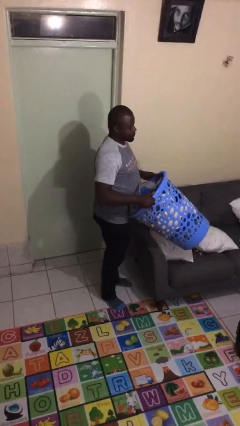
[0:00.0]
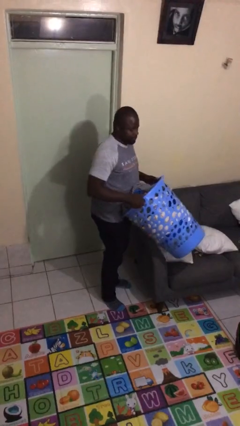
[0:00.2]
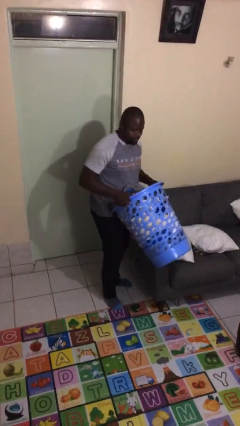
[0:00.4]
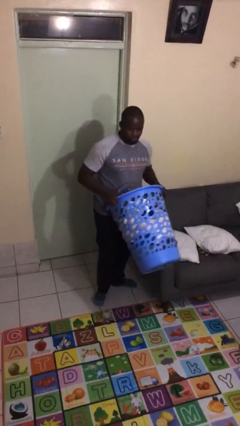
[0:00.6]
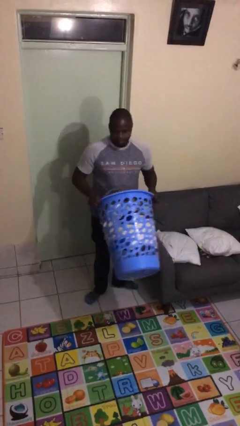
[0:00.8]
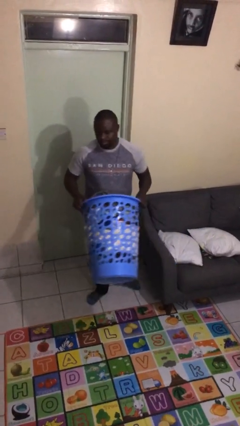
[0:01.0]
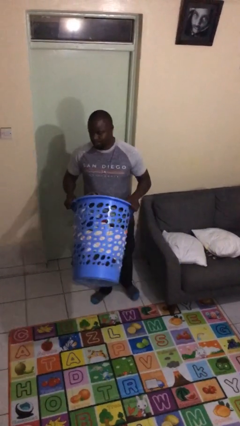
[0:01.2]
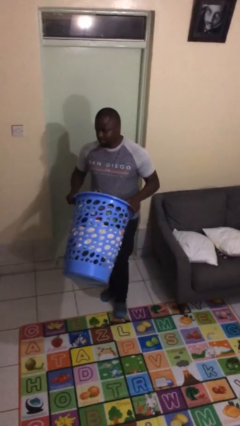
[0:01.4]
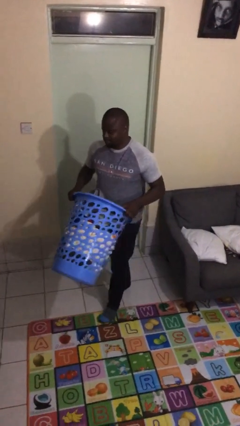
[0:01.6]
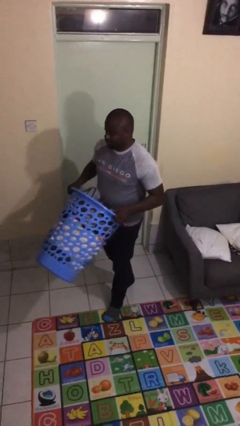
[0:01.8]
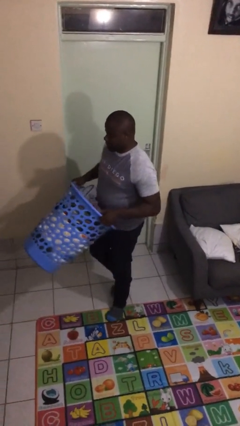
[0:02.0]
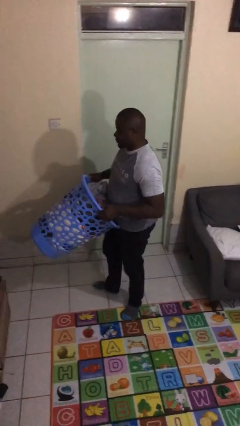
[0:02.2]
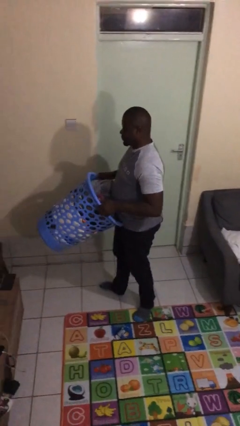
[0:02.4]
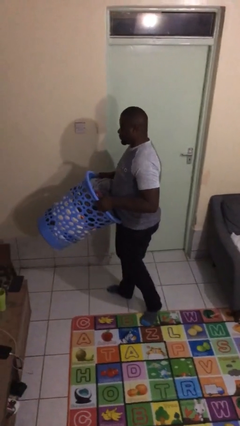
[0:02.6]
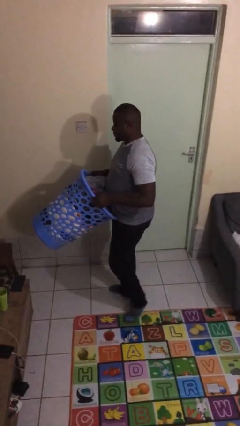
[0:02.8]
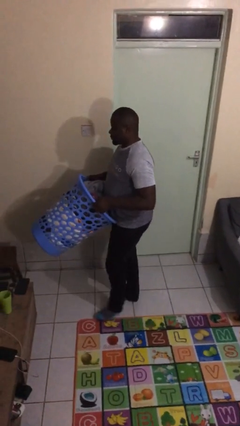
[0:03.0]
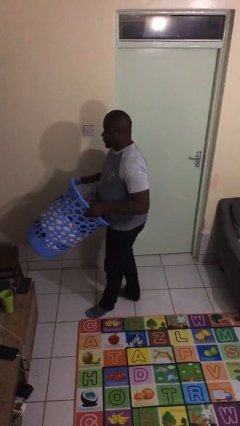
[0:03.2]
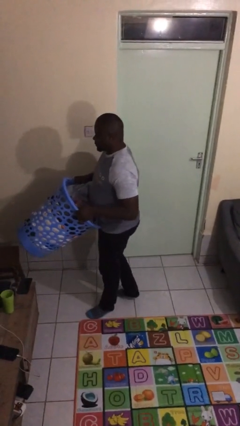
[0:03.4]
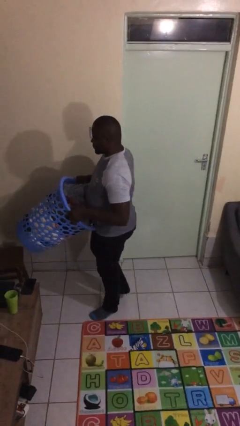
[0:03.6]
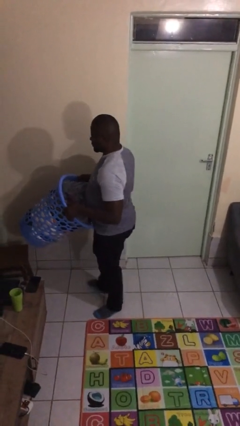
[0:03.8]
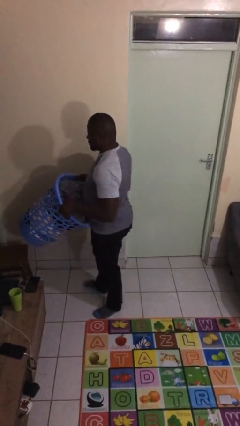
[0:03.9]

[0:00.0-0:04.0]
person carries laundry basket

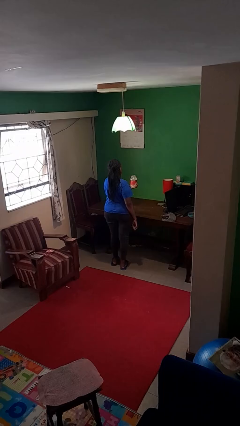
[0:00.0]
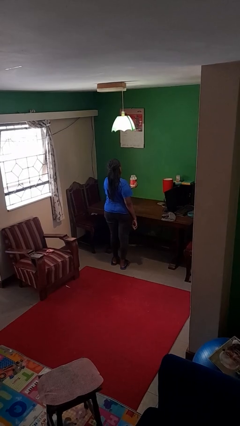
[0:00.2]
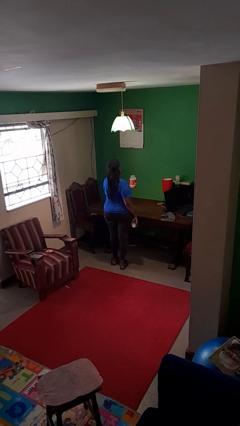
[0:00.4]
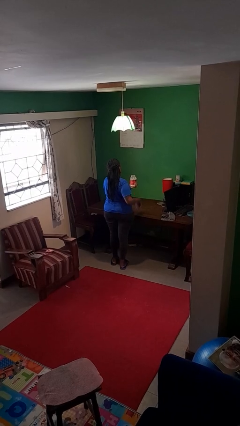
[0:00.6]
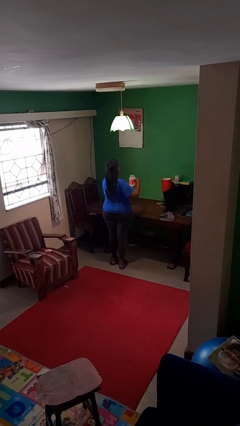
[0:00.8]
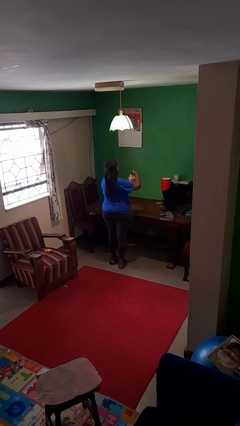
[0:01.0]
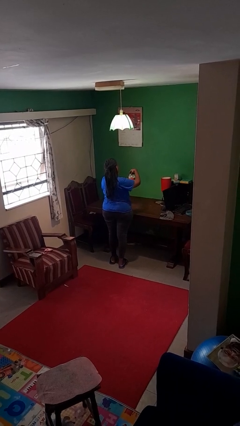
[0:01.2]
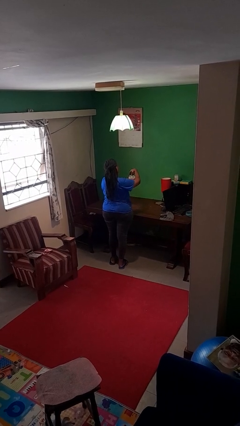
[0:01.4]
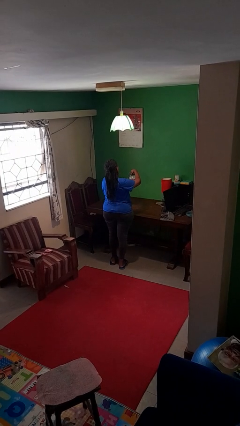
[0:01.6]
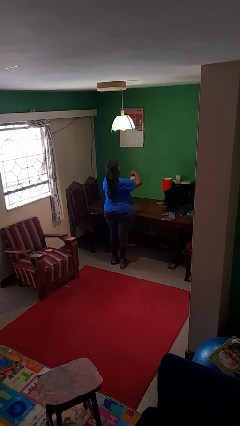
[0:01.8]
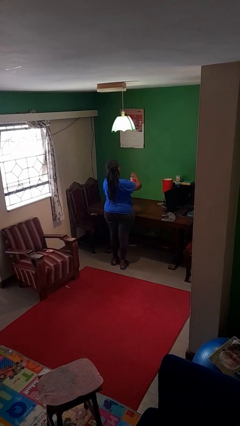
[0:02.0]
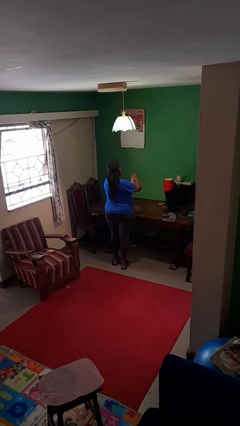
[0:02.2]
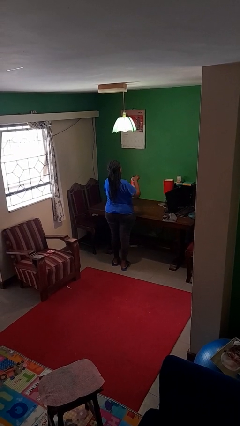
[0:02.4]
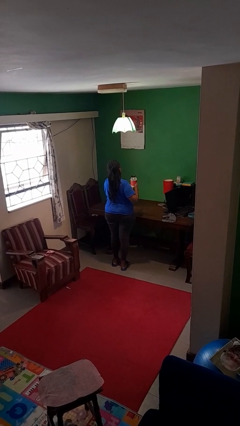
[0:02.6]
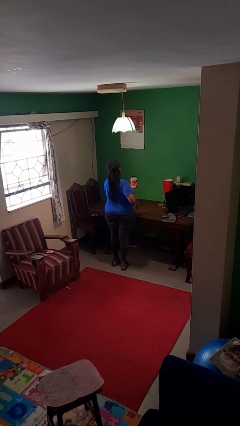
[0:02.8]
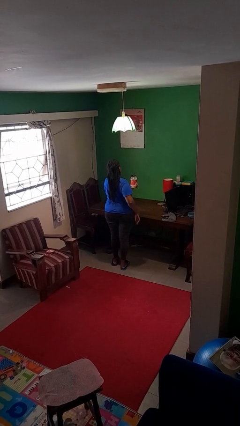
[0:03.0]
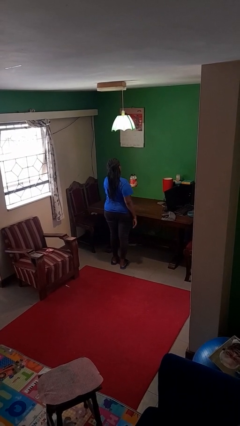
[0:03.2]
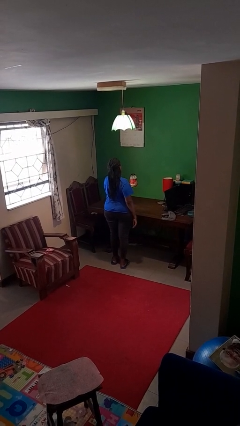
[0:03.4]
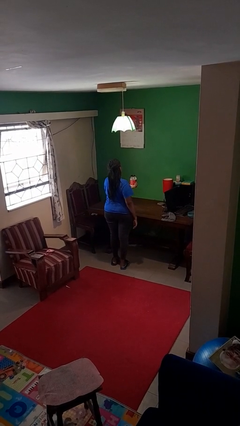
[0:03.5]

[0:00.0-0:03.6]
person closes jar

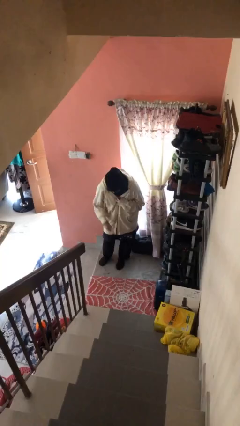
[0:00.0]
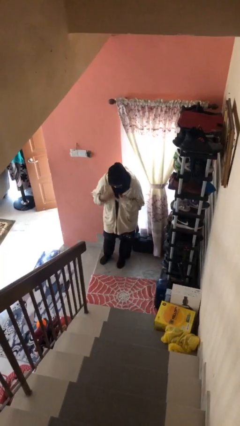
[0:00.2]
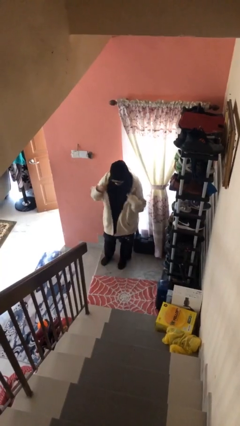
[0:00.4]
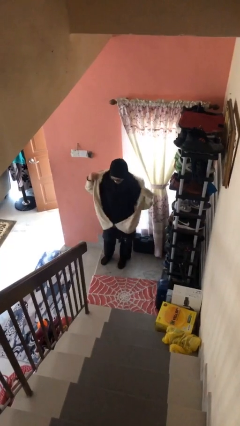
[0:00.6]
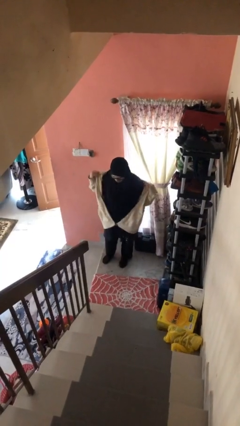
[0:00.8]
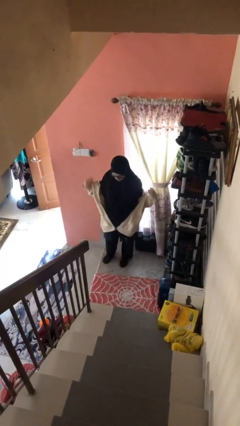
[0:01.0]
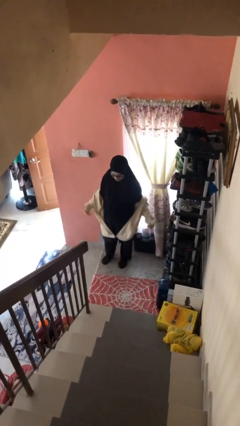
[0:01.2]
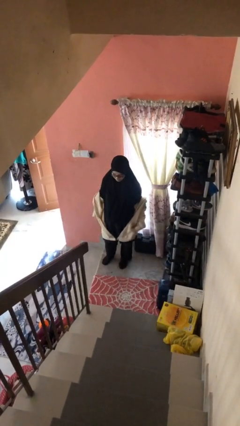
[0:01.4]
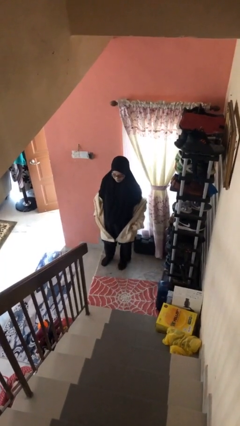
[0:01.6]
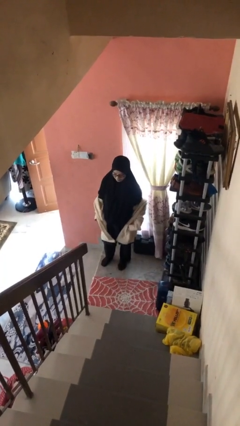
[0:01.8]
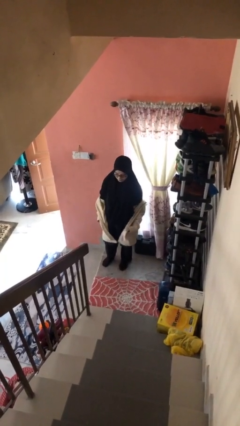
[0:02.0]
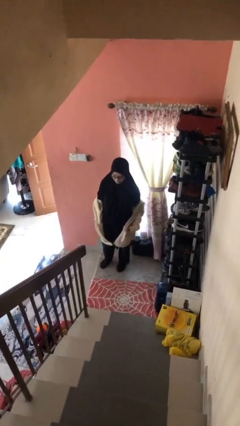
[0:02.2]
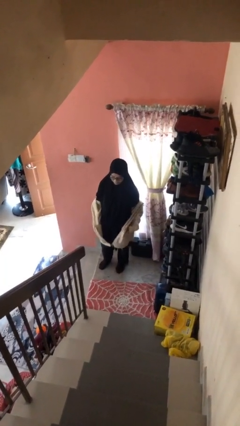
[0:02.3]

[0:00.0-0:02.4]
person takes off jacket

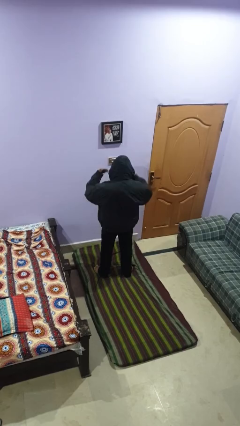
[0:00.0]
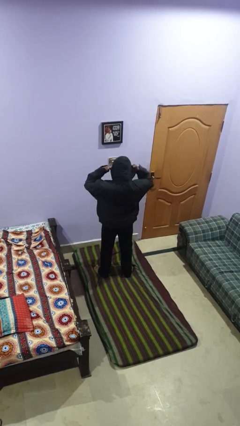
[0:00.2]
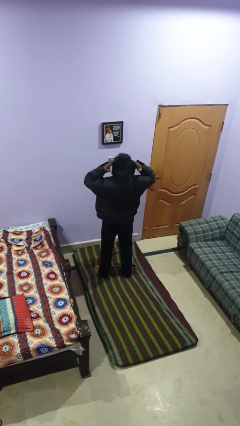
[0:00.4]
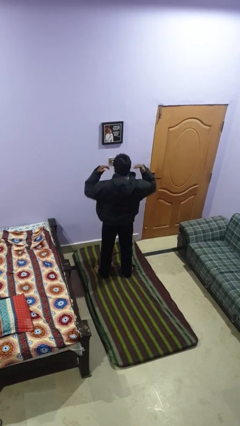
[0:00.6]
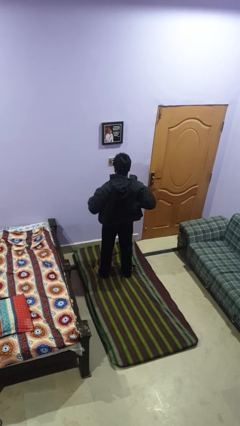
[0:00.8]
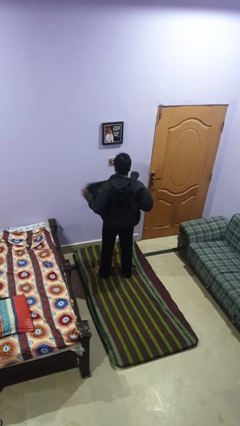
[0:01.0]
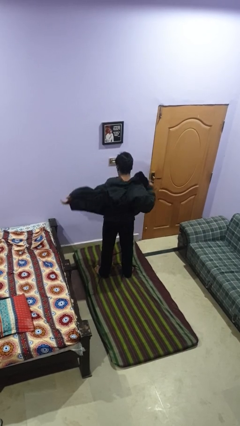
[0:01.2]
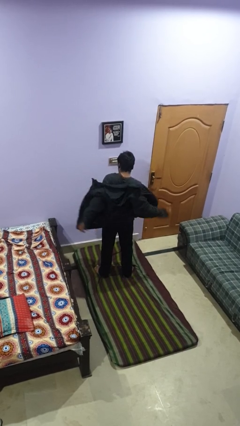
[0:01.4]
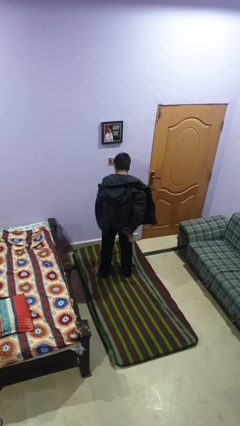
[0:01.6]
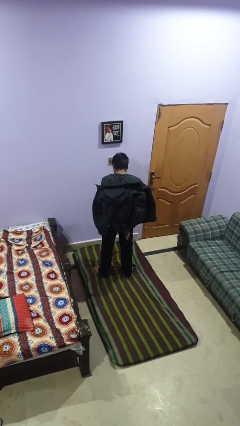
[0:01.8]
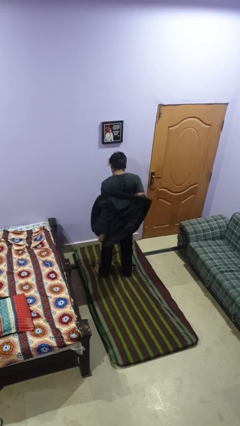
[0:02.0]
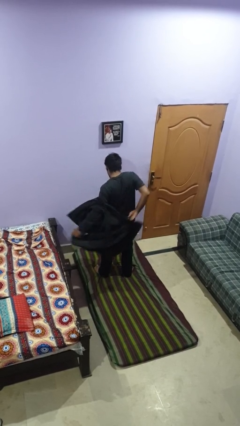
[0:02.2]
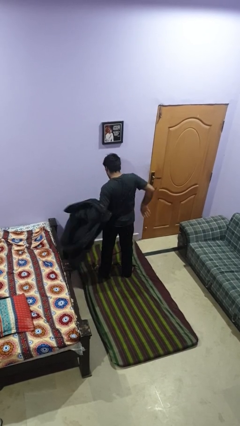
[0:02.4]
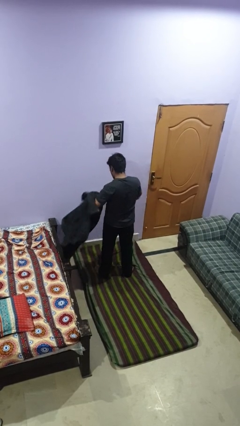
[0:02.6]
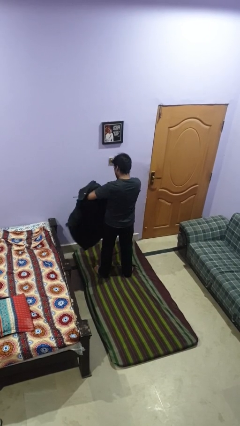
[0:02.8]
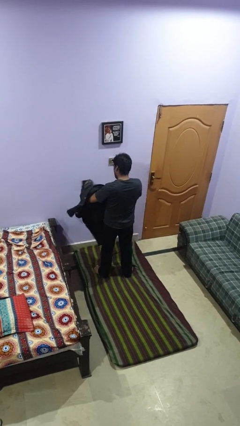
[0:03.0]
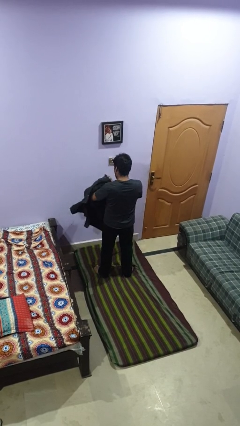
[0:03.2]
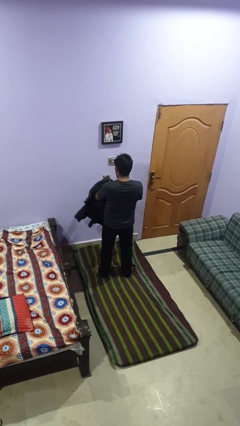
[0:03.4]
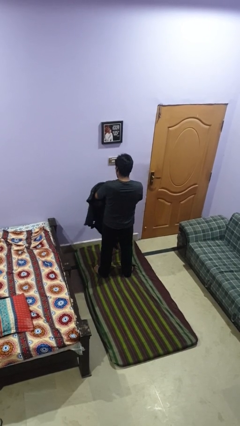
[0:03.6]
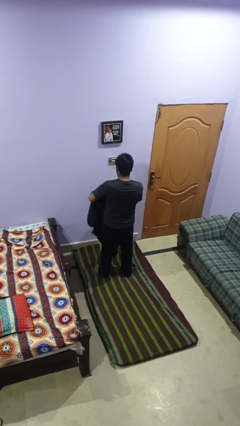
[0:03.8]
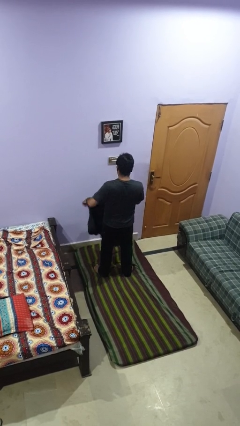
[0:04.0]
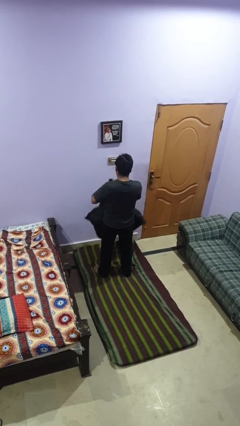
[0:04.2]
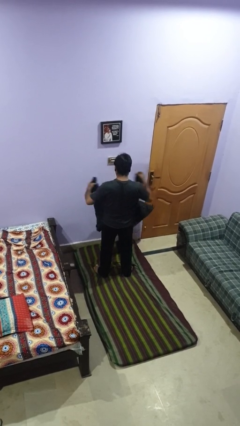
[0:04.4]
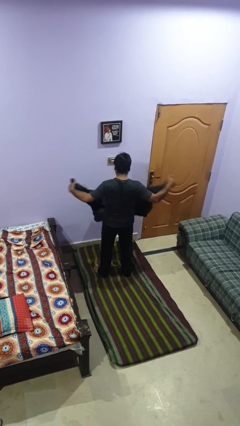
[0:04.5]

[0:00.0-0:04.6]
person takes off hoodie

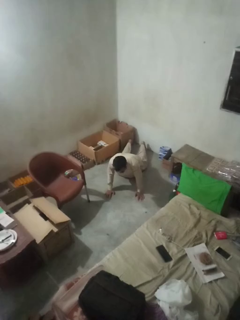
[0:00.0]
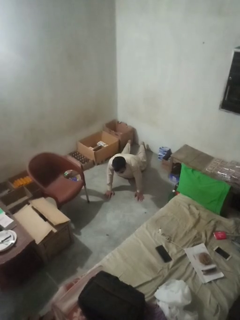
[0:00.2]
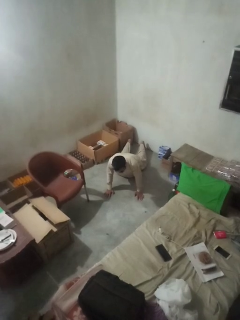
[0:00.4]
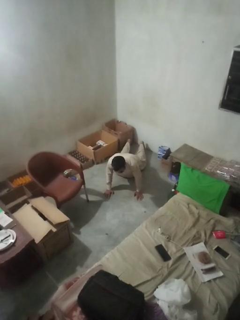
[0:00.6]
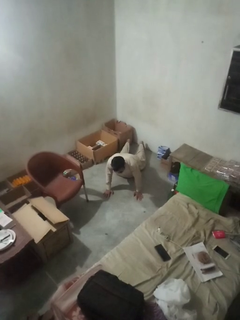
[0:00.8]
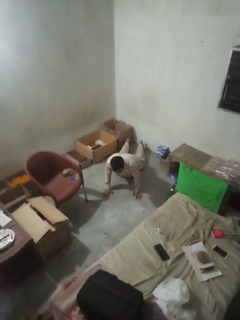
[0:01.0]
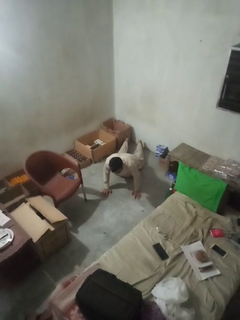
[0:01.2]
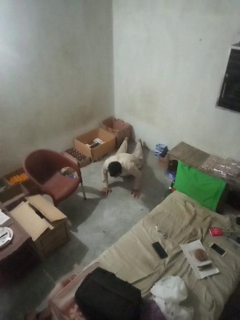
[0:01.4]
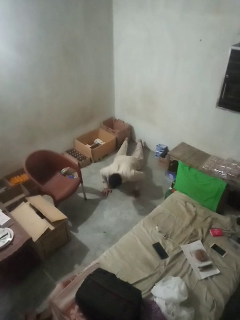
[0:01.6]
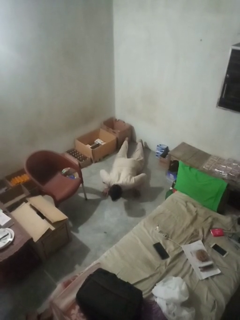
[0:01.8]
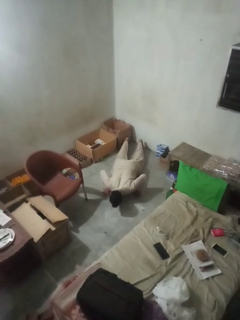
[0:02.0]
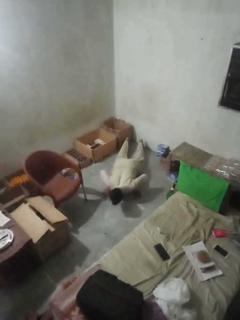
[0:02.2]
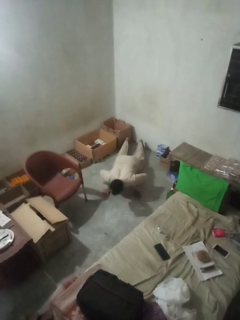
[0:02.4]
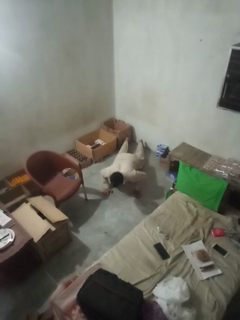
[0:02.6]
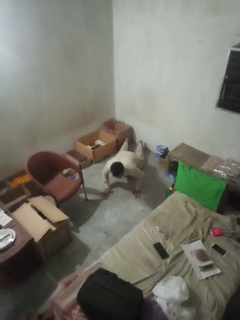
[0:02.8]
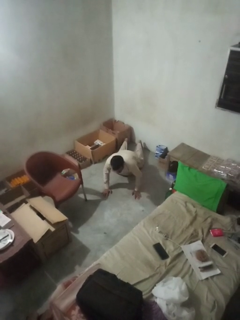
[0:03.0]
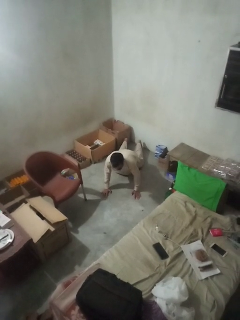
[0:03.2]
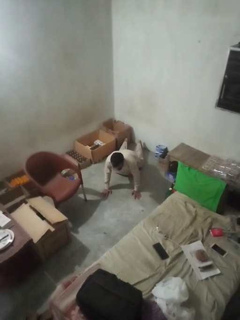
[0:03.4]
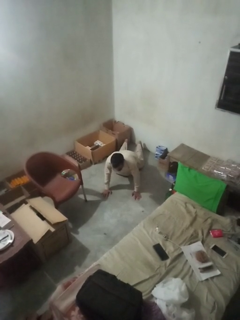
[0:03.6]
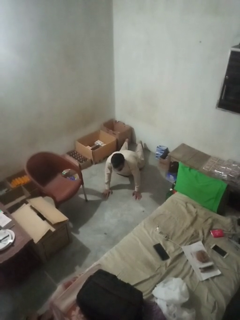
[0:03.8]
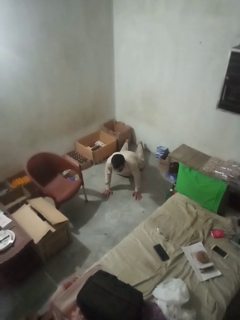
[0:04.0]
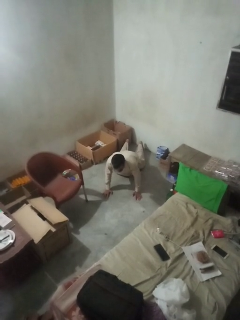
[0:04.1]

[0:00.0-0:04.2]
person exercises with pushup
